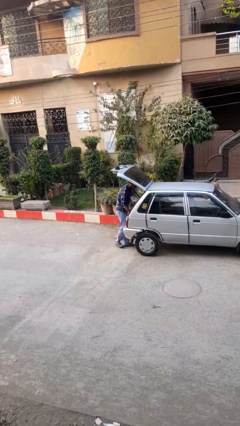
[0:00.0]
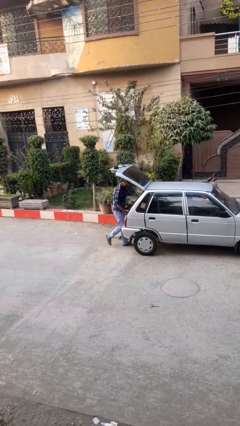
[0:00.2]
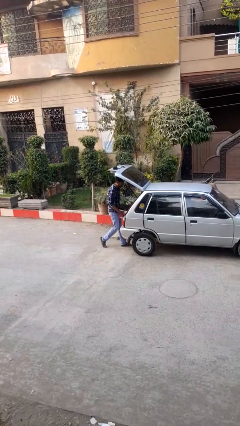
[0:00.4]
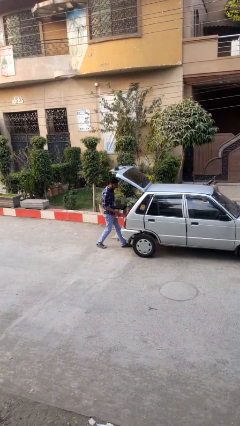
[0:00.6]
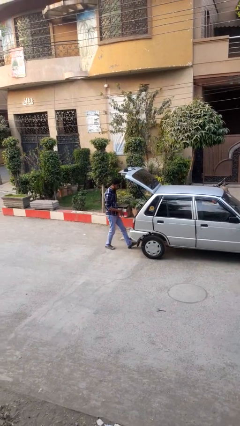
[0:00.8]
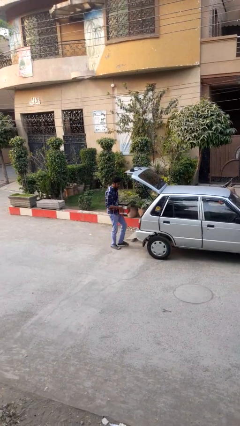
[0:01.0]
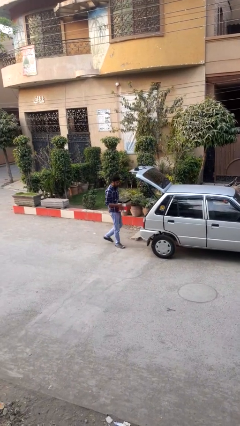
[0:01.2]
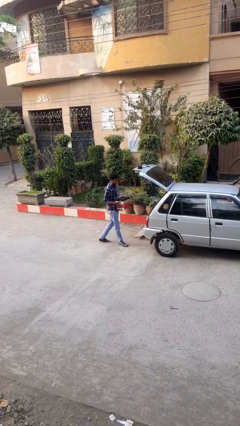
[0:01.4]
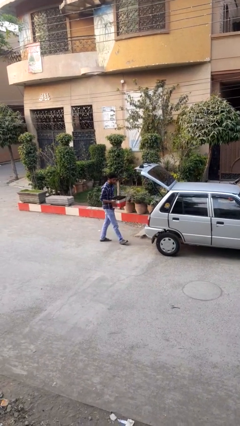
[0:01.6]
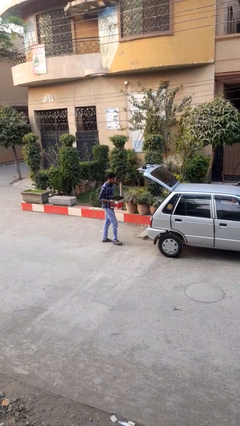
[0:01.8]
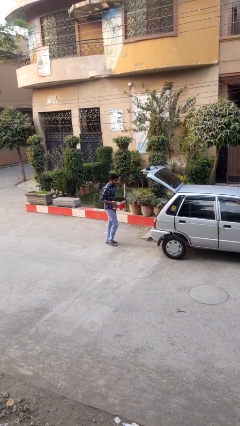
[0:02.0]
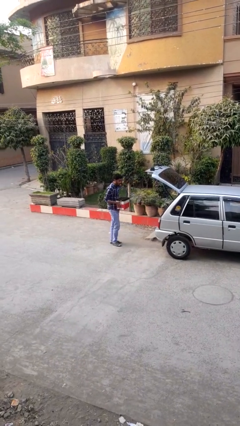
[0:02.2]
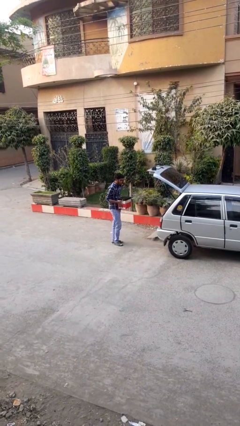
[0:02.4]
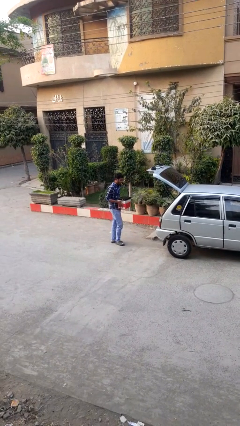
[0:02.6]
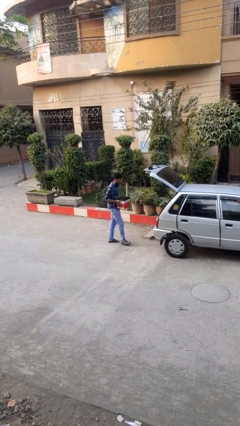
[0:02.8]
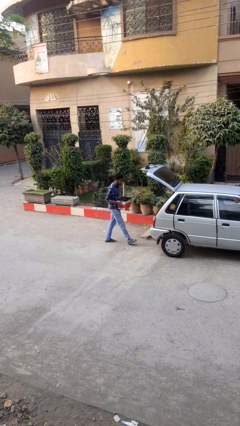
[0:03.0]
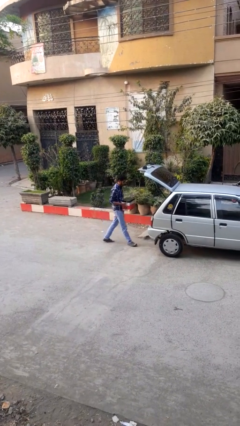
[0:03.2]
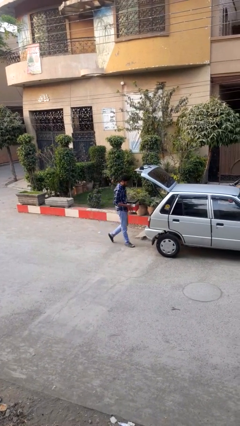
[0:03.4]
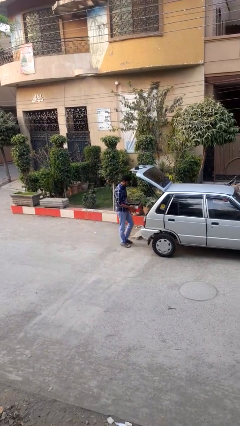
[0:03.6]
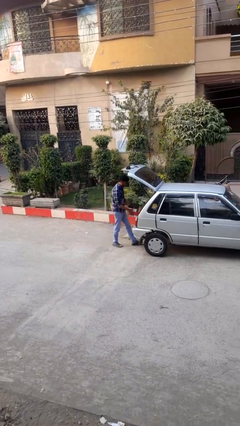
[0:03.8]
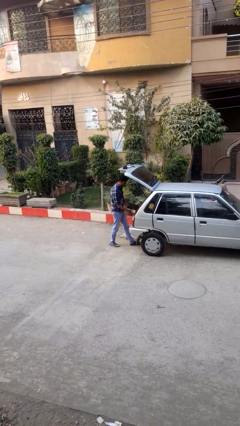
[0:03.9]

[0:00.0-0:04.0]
person unloads car

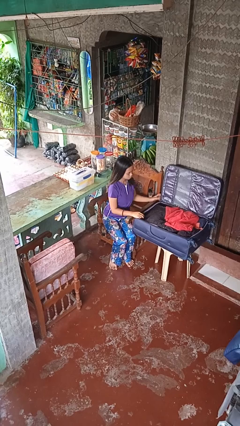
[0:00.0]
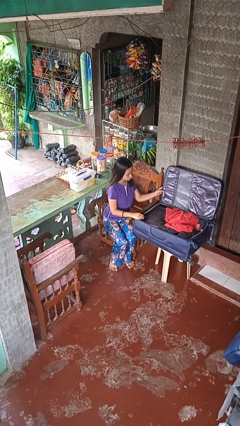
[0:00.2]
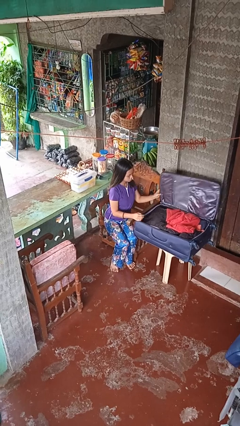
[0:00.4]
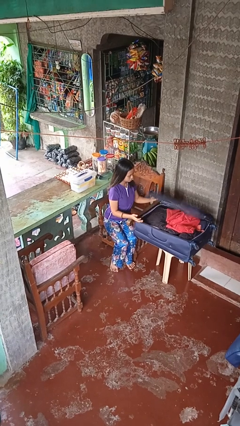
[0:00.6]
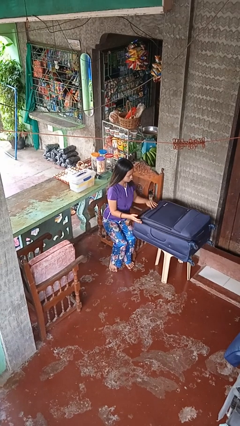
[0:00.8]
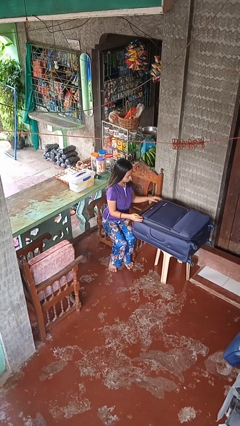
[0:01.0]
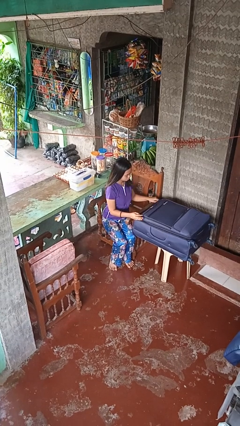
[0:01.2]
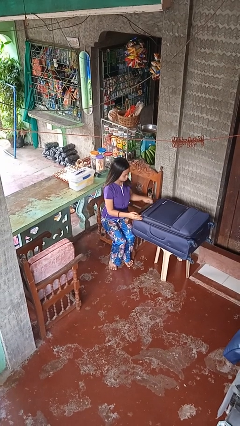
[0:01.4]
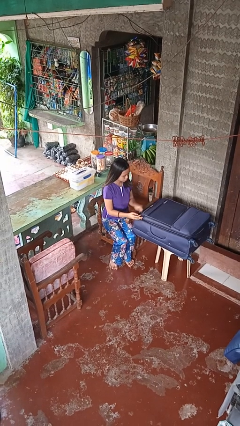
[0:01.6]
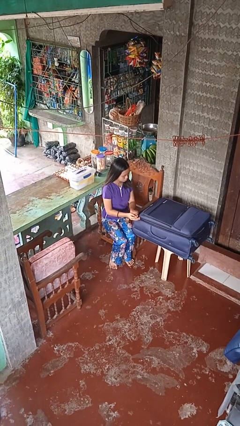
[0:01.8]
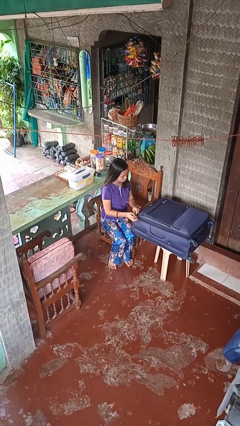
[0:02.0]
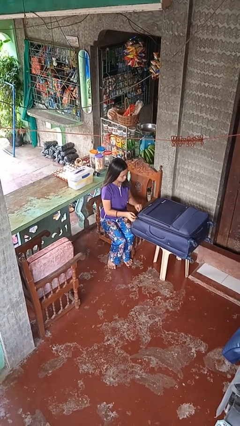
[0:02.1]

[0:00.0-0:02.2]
person closes suitcase

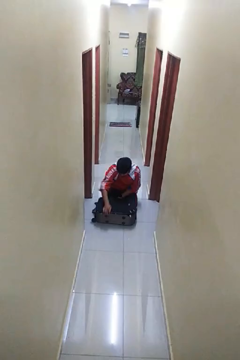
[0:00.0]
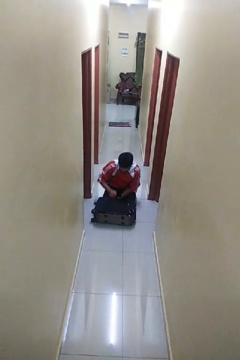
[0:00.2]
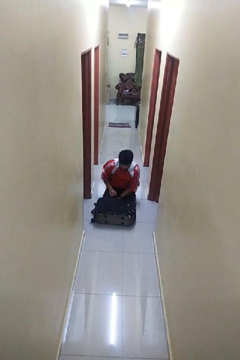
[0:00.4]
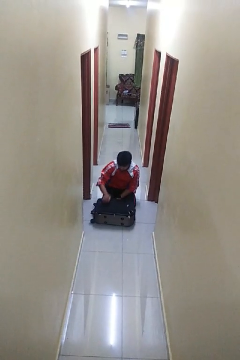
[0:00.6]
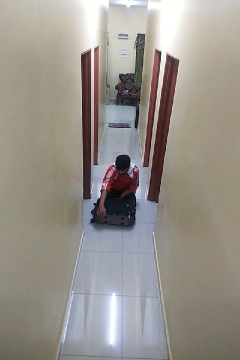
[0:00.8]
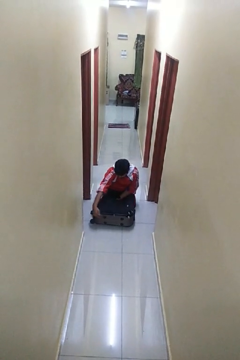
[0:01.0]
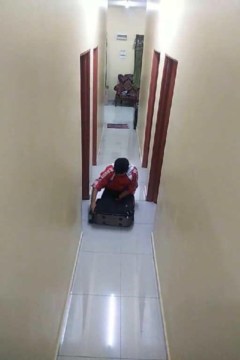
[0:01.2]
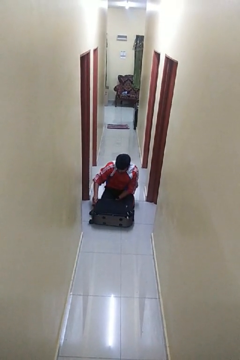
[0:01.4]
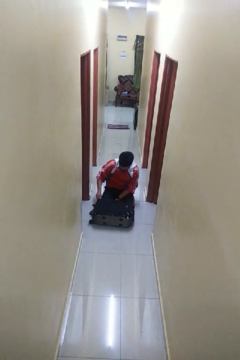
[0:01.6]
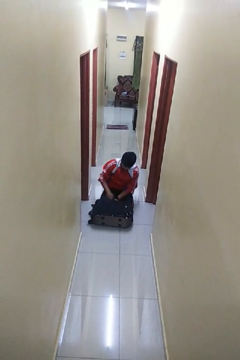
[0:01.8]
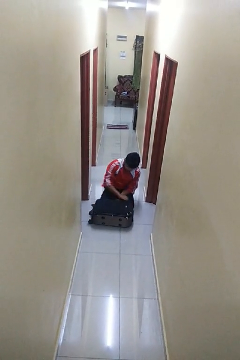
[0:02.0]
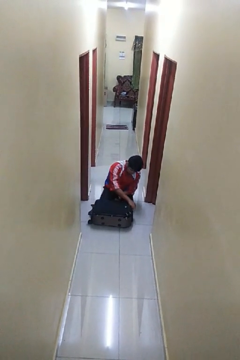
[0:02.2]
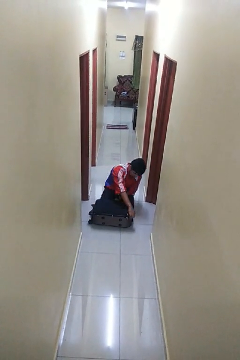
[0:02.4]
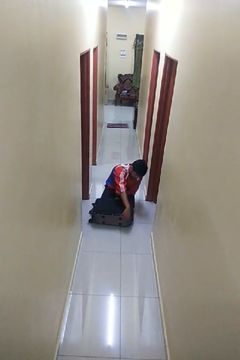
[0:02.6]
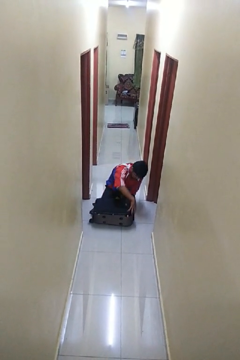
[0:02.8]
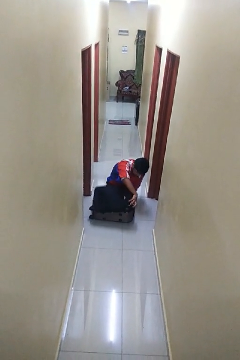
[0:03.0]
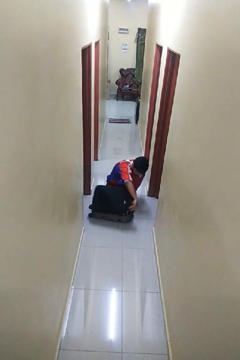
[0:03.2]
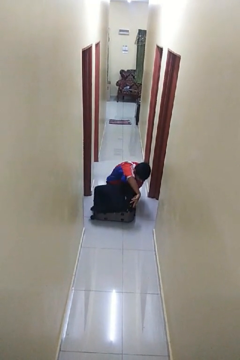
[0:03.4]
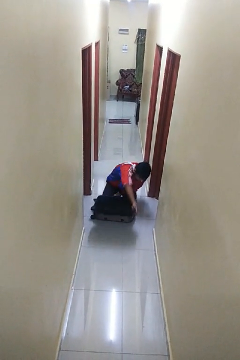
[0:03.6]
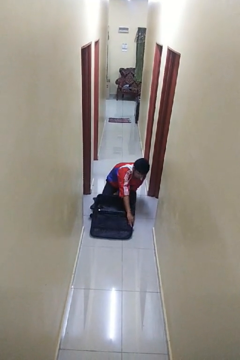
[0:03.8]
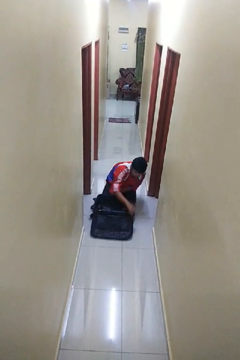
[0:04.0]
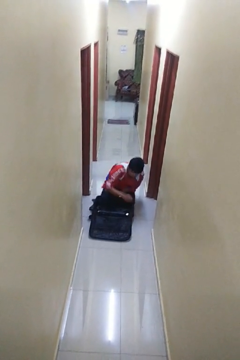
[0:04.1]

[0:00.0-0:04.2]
person opens suitcase

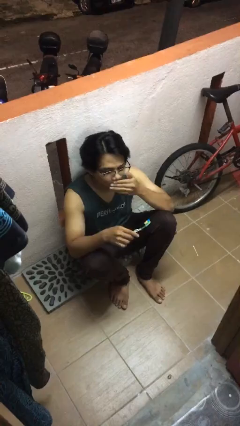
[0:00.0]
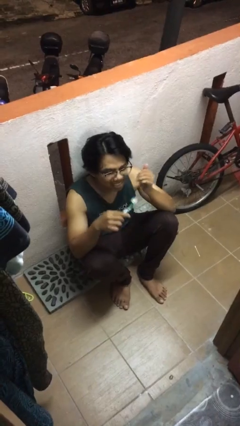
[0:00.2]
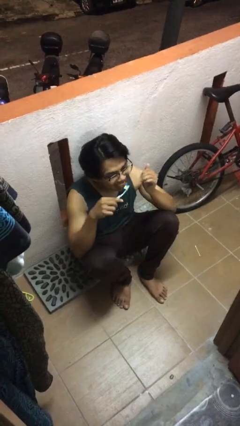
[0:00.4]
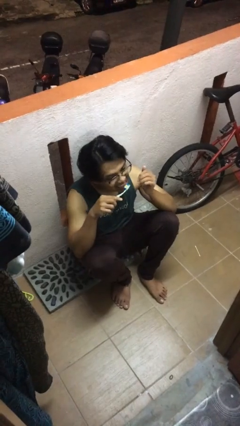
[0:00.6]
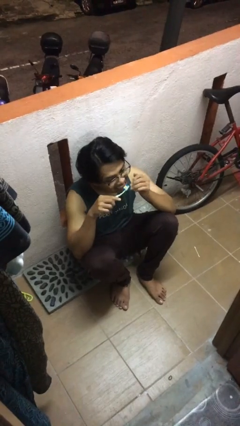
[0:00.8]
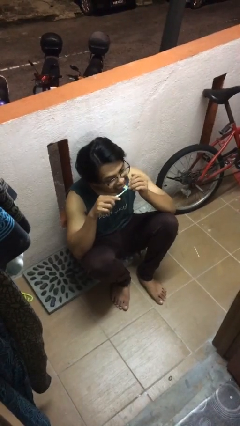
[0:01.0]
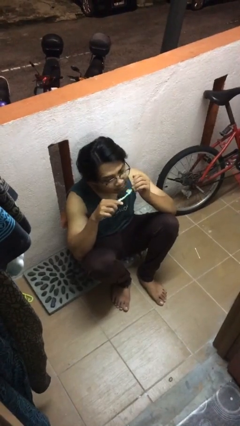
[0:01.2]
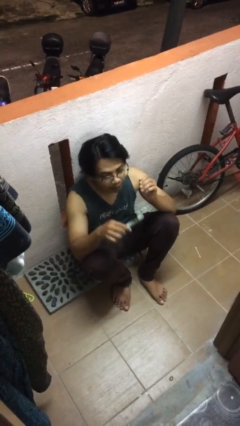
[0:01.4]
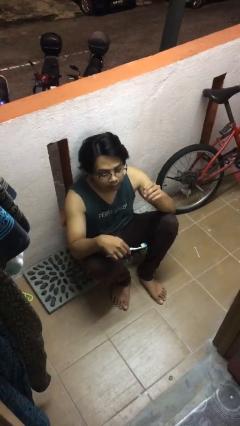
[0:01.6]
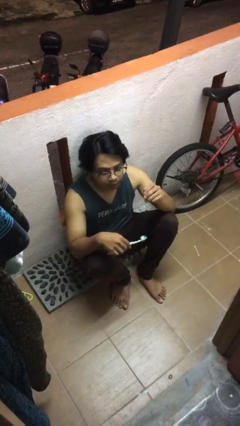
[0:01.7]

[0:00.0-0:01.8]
person brushes teeth

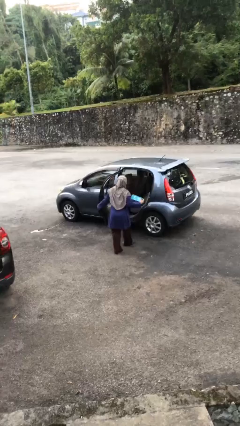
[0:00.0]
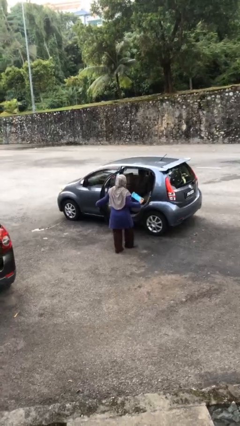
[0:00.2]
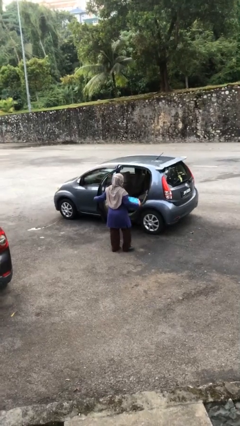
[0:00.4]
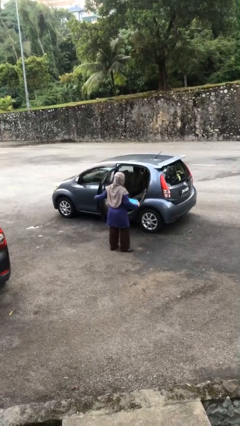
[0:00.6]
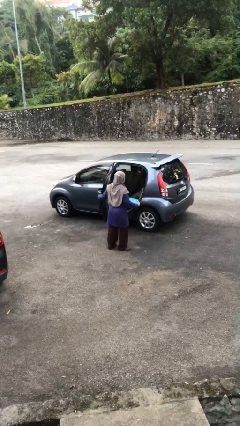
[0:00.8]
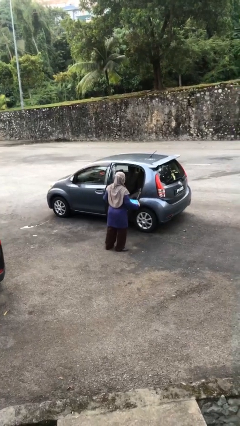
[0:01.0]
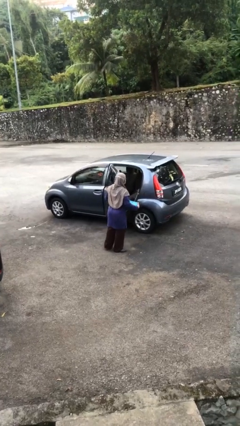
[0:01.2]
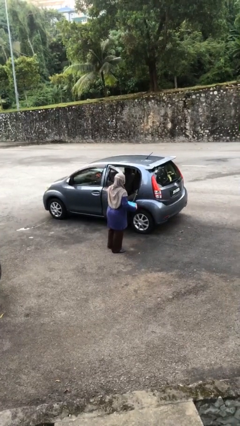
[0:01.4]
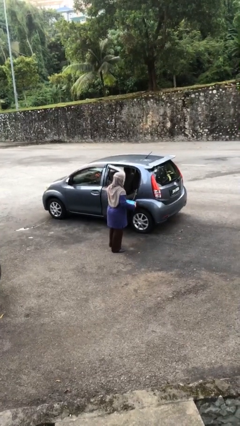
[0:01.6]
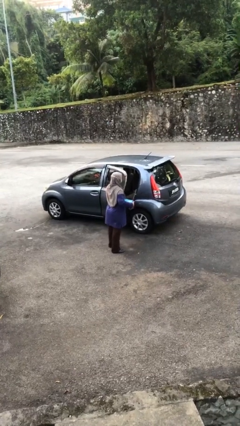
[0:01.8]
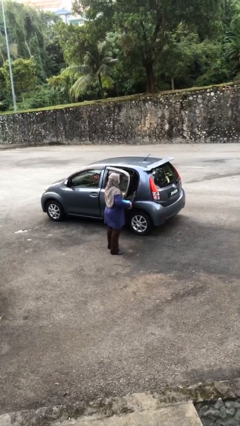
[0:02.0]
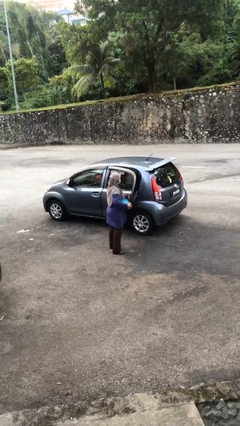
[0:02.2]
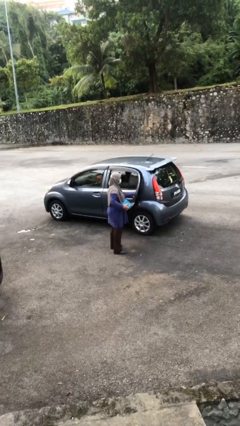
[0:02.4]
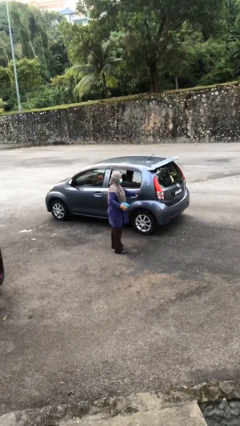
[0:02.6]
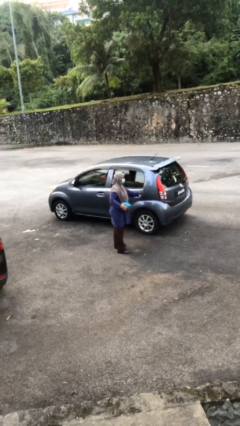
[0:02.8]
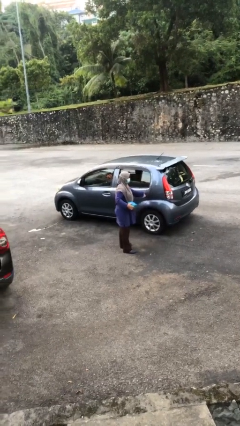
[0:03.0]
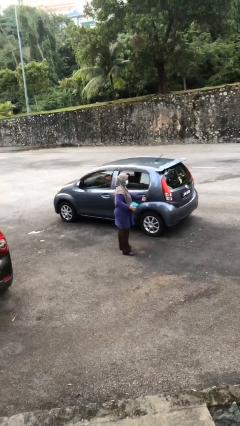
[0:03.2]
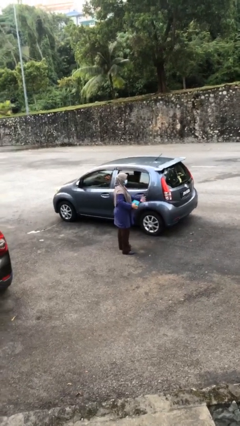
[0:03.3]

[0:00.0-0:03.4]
person closes car door

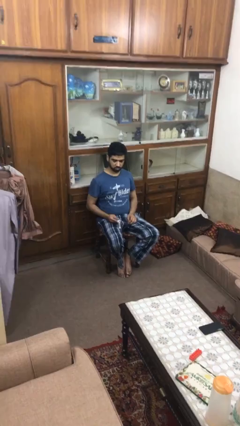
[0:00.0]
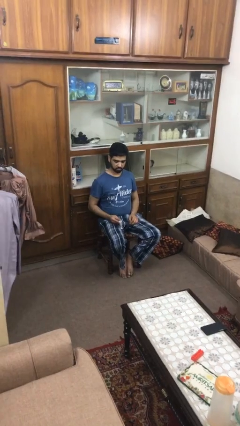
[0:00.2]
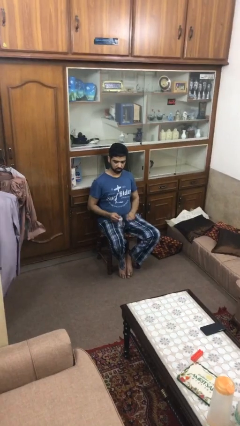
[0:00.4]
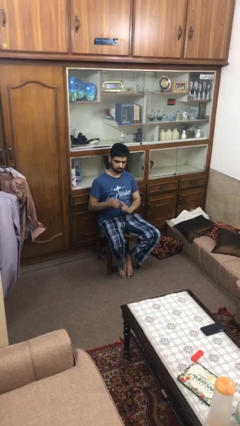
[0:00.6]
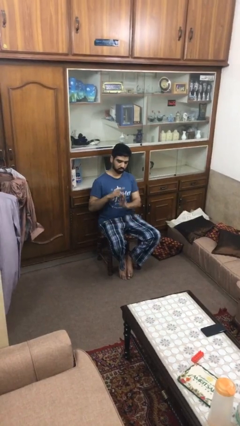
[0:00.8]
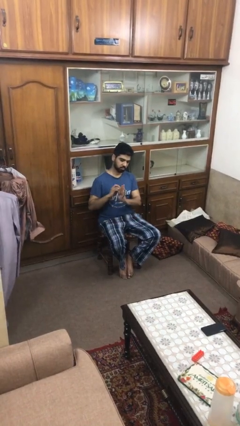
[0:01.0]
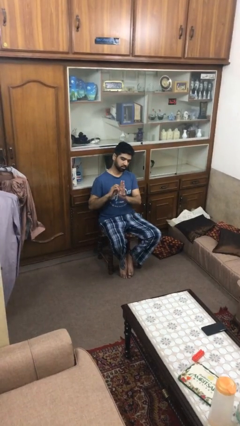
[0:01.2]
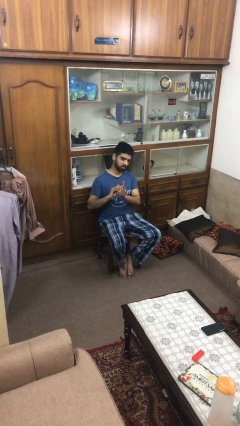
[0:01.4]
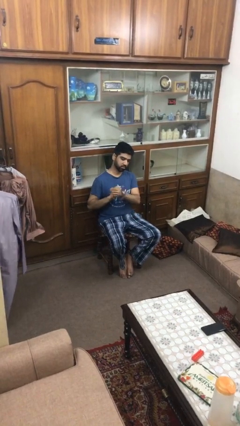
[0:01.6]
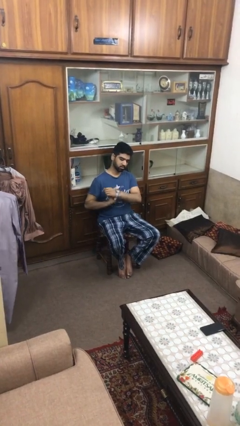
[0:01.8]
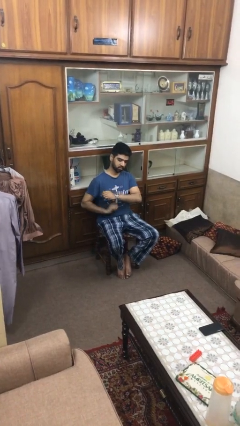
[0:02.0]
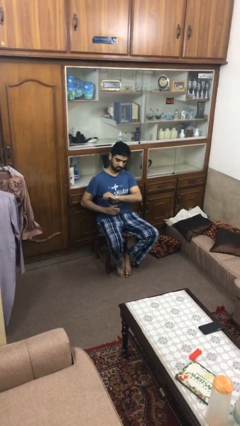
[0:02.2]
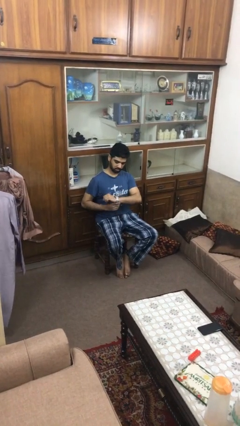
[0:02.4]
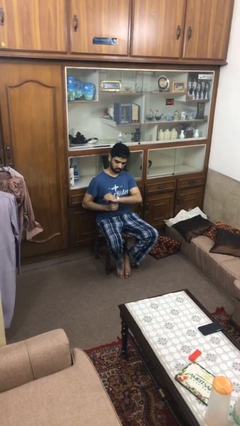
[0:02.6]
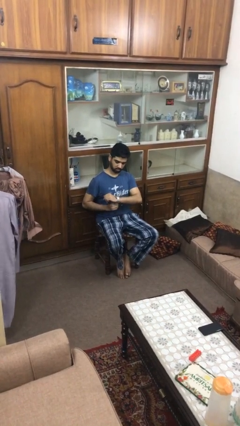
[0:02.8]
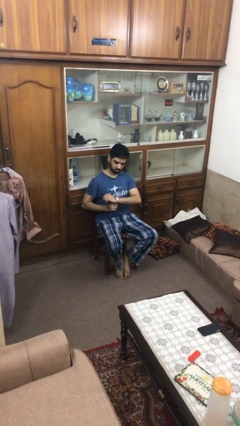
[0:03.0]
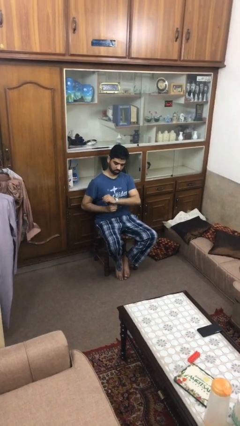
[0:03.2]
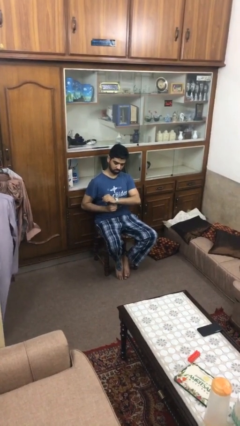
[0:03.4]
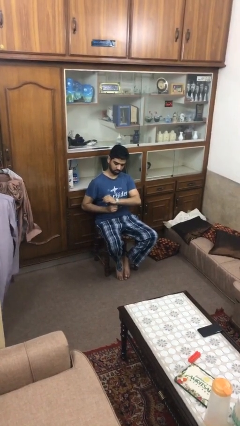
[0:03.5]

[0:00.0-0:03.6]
person puts on wristwatch
